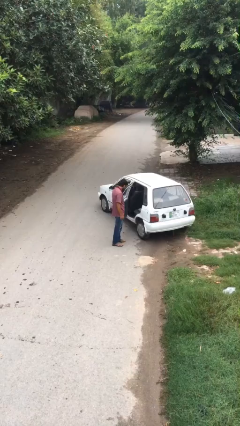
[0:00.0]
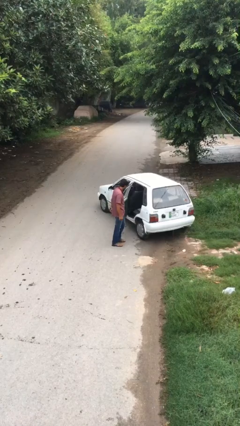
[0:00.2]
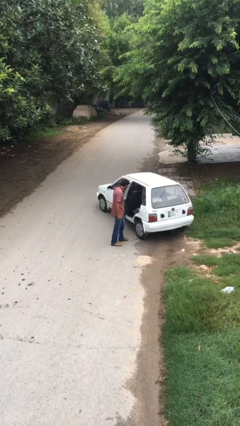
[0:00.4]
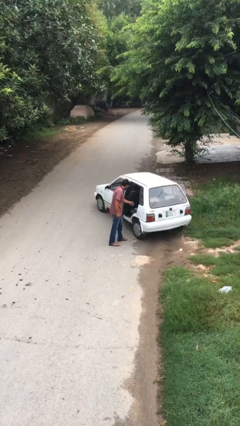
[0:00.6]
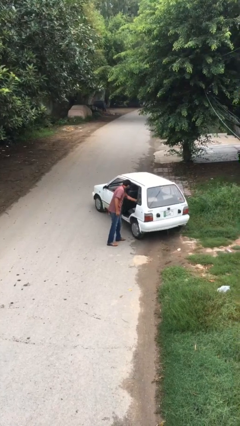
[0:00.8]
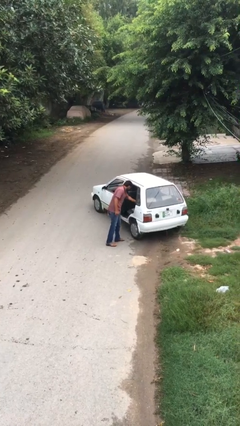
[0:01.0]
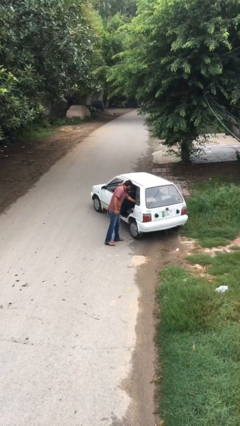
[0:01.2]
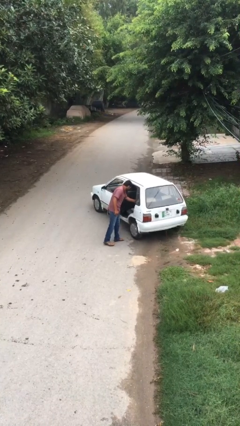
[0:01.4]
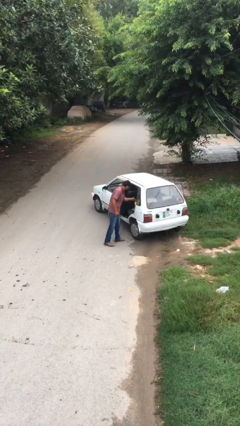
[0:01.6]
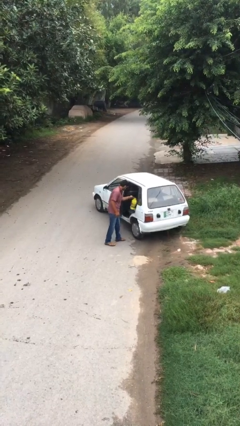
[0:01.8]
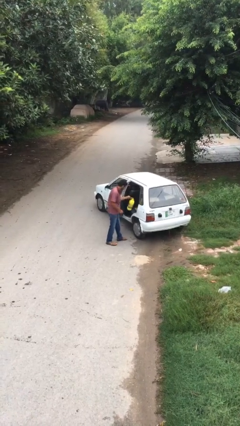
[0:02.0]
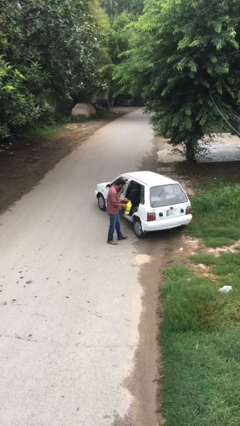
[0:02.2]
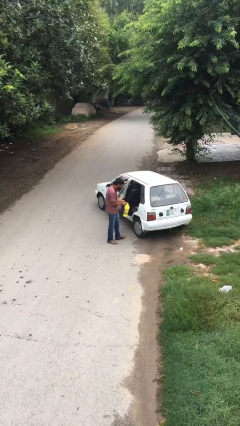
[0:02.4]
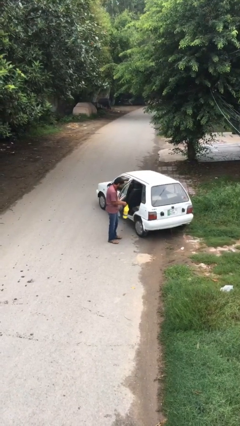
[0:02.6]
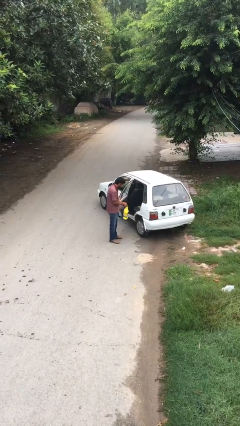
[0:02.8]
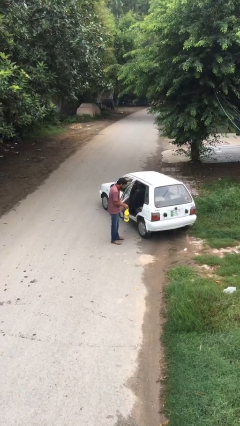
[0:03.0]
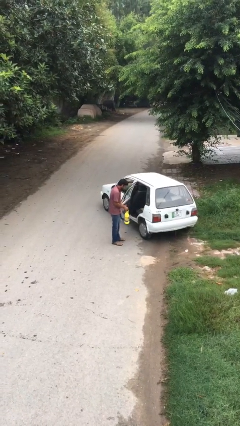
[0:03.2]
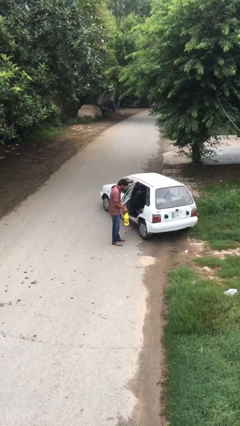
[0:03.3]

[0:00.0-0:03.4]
person unloads car

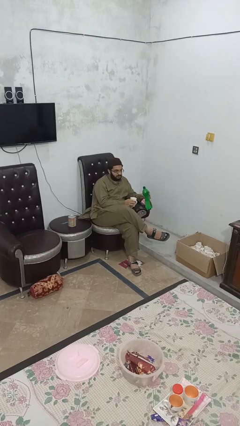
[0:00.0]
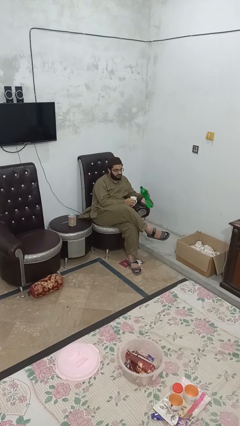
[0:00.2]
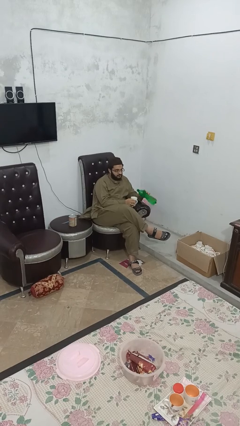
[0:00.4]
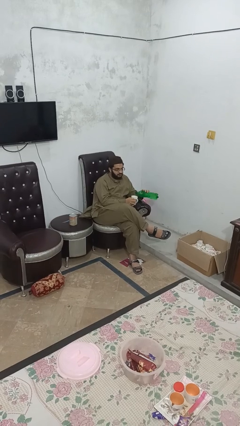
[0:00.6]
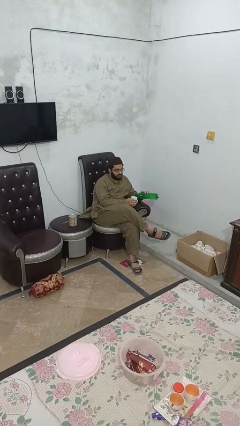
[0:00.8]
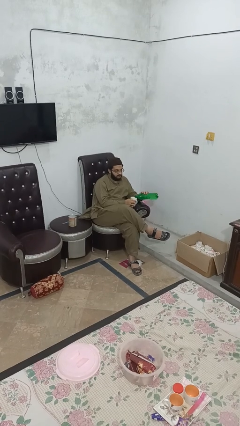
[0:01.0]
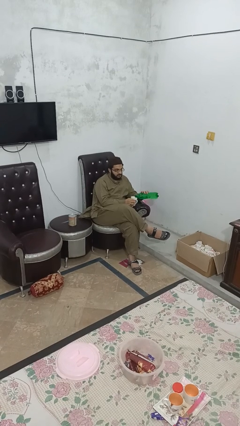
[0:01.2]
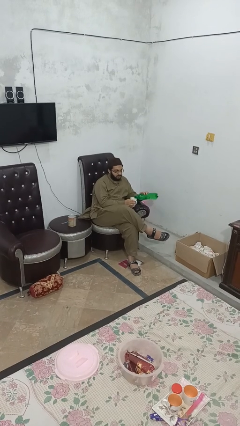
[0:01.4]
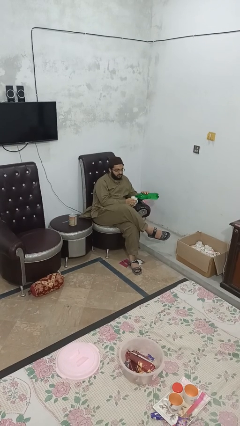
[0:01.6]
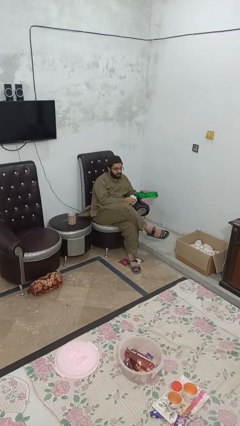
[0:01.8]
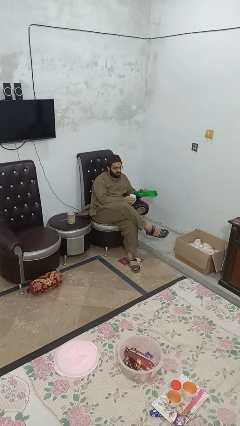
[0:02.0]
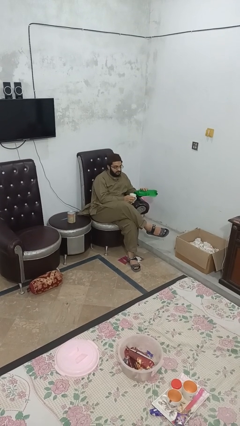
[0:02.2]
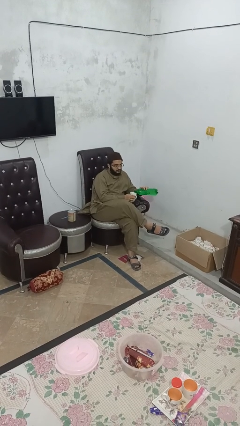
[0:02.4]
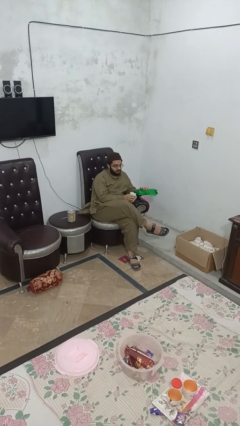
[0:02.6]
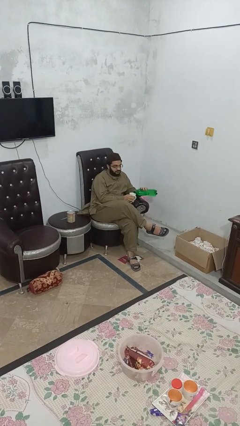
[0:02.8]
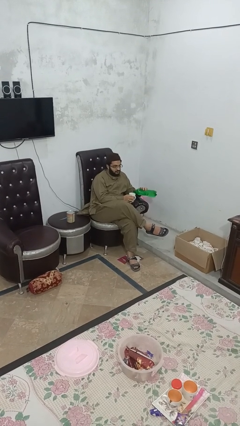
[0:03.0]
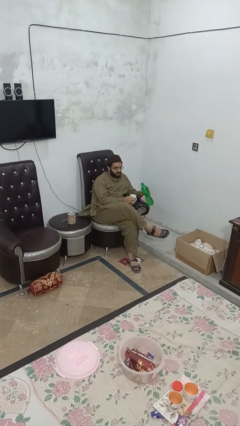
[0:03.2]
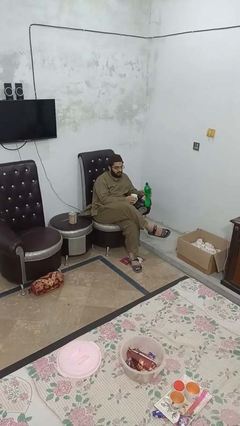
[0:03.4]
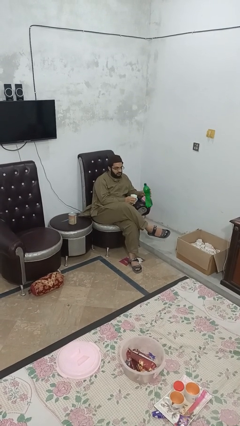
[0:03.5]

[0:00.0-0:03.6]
person pours liquid into cup

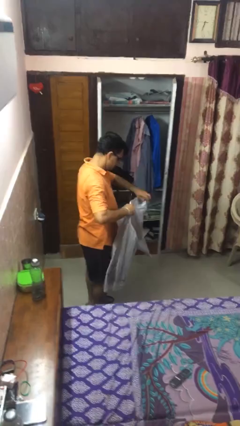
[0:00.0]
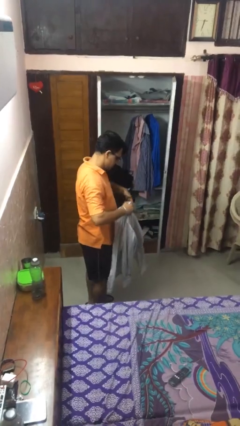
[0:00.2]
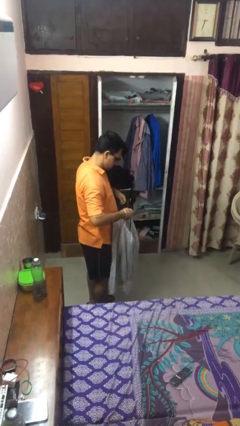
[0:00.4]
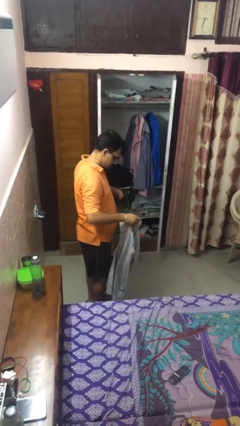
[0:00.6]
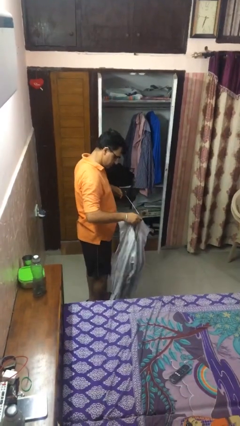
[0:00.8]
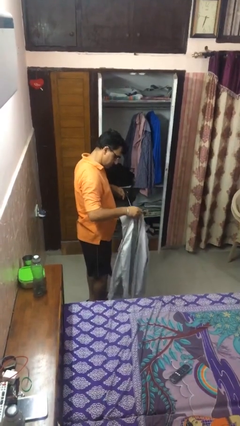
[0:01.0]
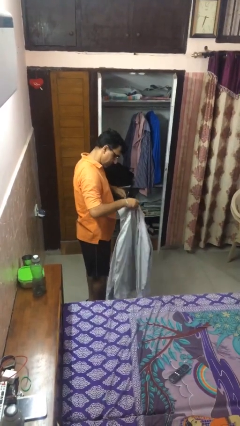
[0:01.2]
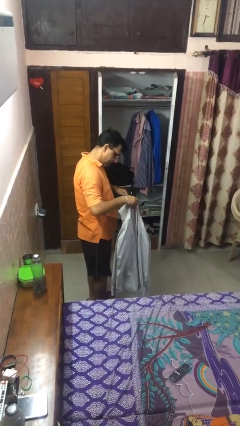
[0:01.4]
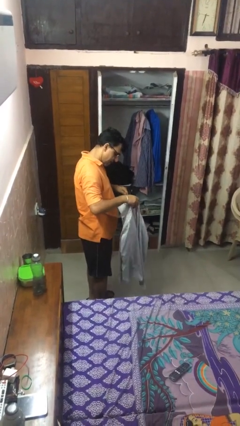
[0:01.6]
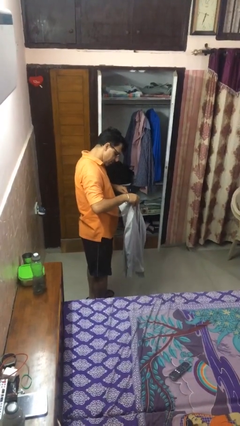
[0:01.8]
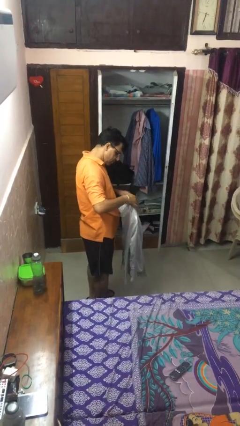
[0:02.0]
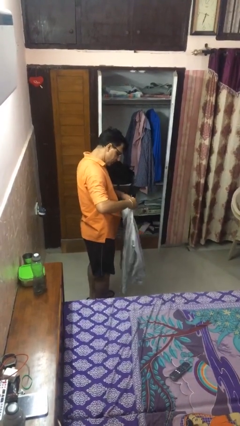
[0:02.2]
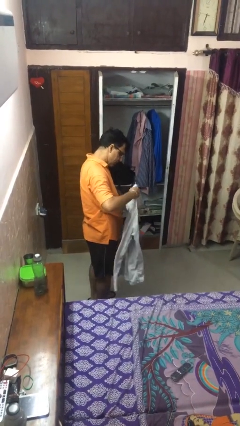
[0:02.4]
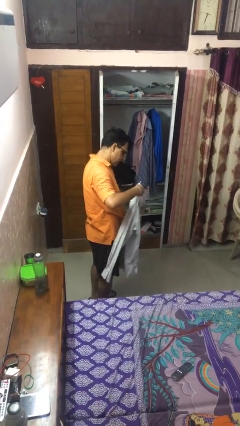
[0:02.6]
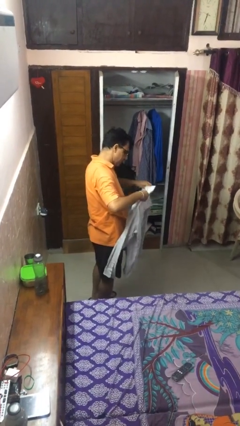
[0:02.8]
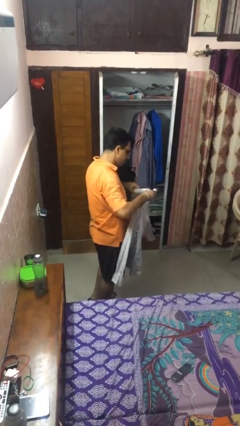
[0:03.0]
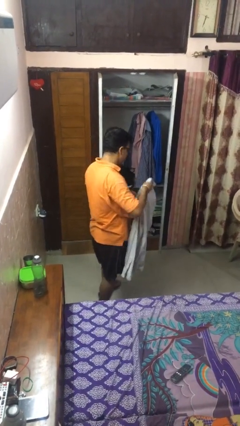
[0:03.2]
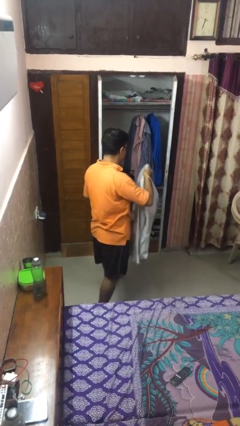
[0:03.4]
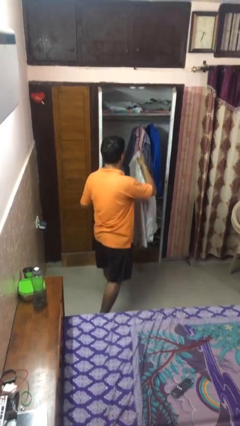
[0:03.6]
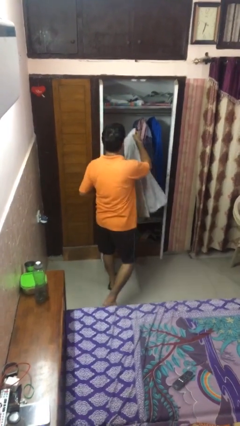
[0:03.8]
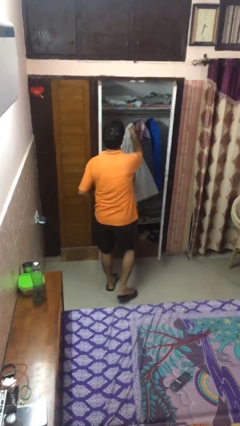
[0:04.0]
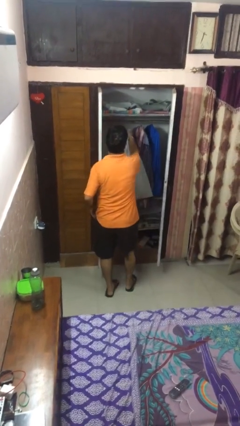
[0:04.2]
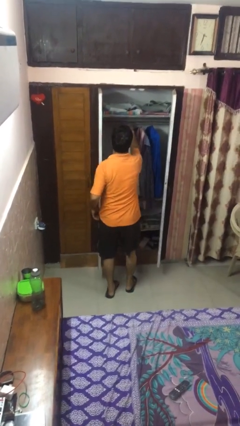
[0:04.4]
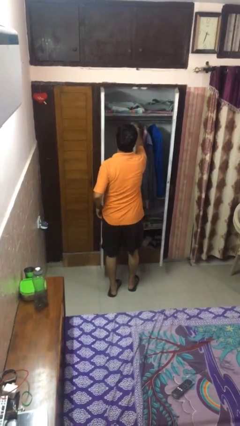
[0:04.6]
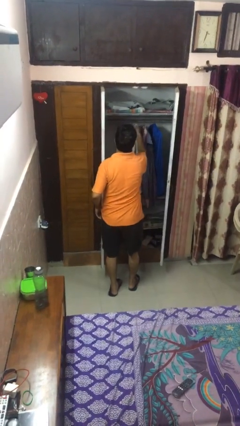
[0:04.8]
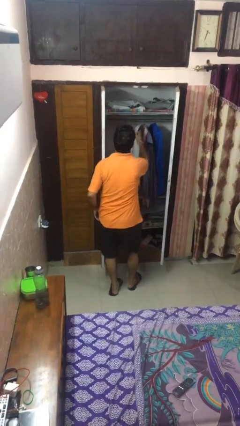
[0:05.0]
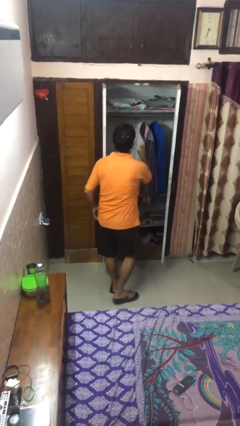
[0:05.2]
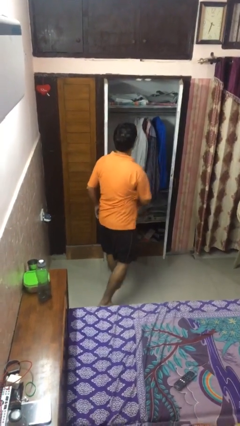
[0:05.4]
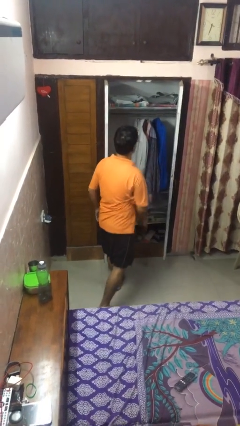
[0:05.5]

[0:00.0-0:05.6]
person puts clothes into closet

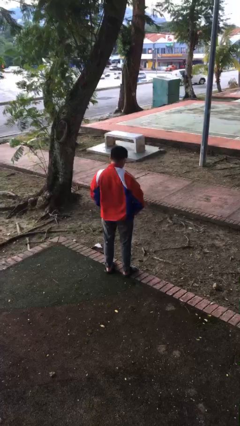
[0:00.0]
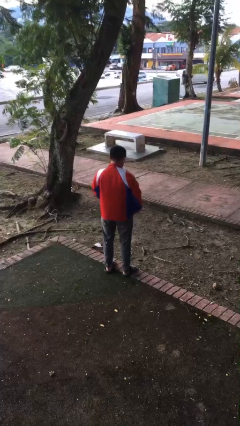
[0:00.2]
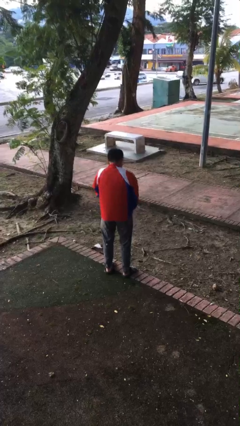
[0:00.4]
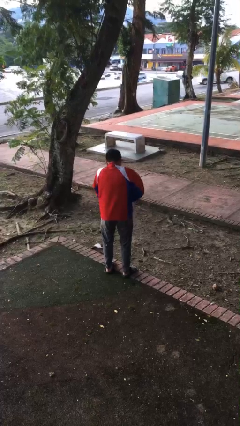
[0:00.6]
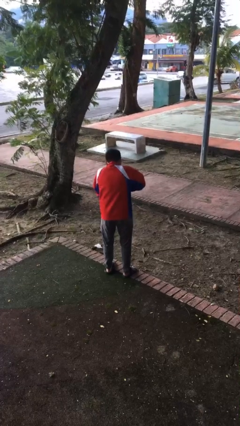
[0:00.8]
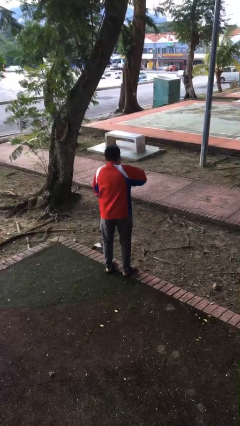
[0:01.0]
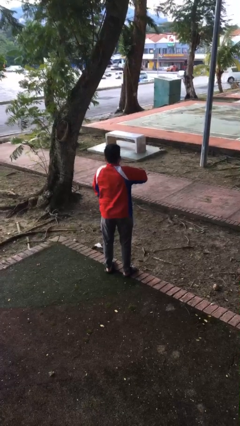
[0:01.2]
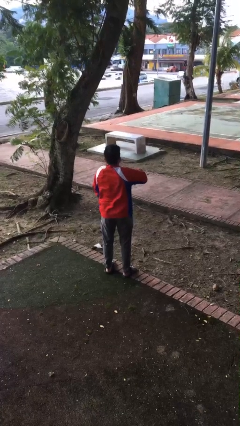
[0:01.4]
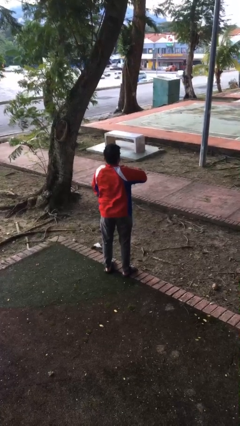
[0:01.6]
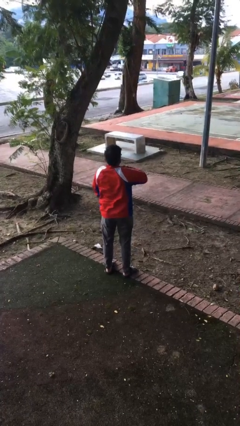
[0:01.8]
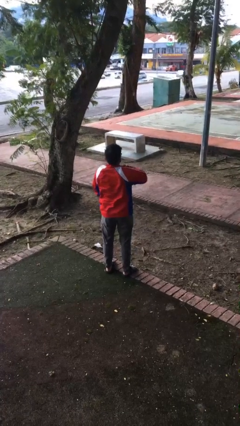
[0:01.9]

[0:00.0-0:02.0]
person zips up jacket

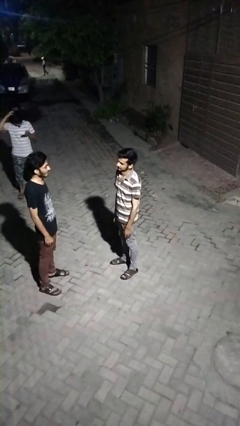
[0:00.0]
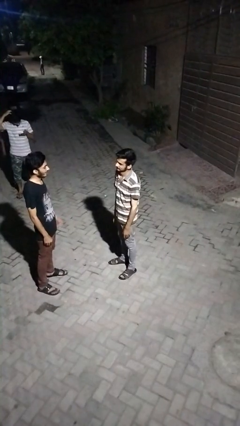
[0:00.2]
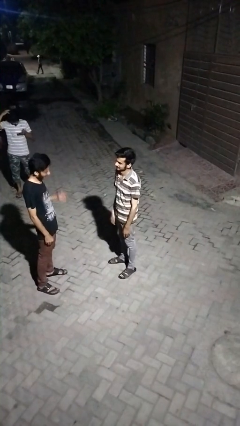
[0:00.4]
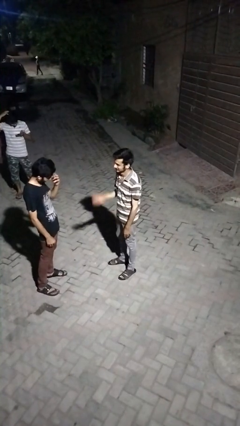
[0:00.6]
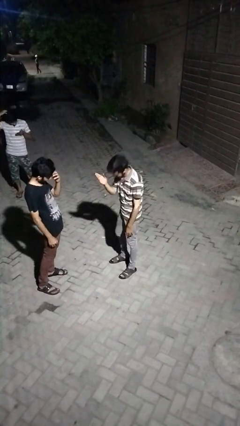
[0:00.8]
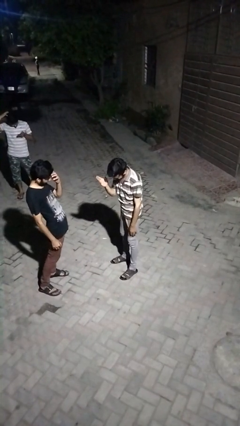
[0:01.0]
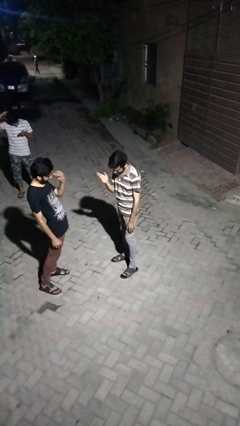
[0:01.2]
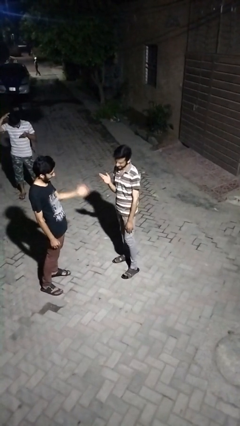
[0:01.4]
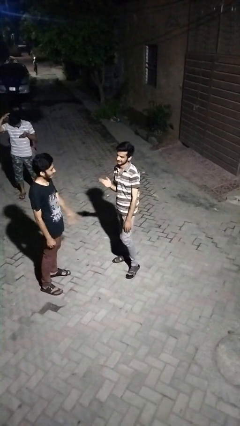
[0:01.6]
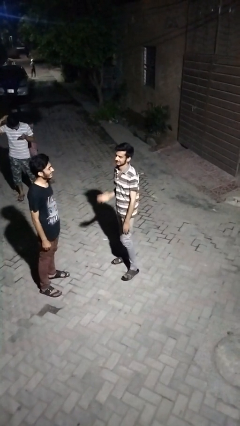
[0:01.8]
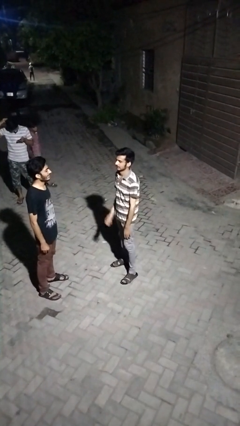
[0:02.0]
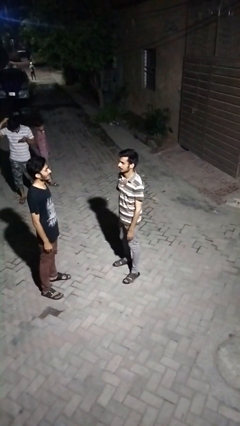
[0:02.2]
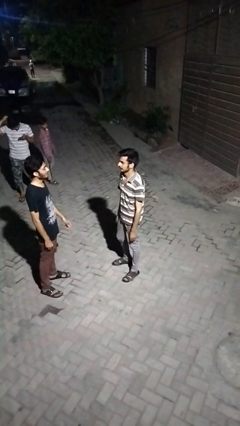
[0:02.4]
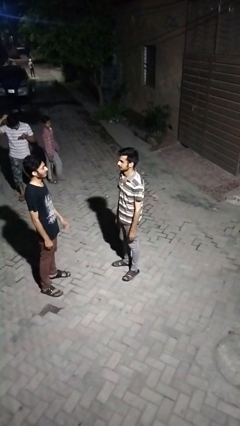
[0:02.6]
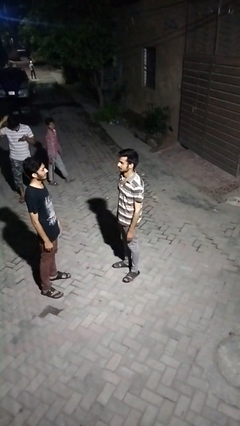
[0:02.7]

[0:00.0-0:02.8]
person laughs with person

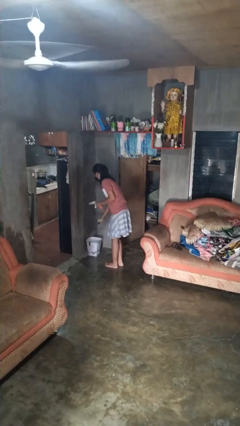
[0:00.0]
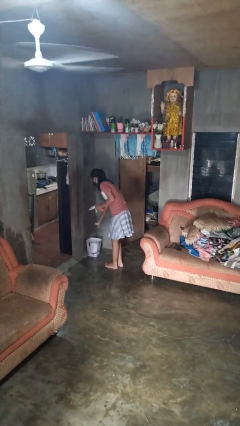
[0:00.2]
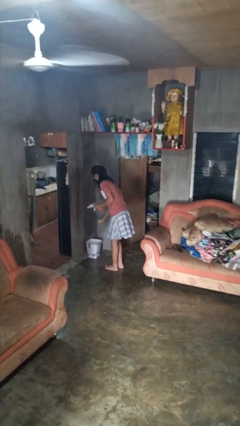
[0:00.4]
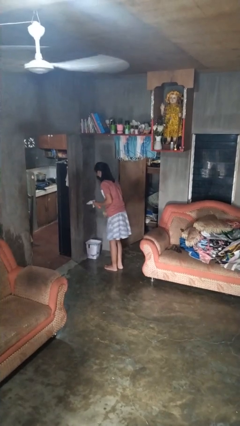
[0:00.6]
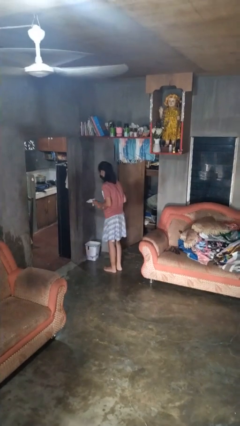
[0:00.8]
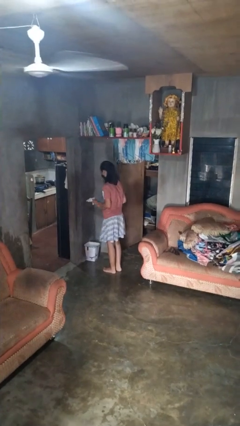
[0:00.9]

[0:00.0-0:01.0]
person discards trash
